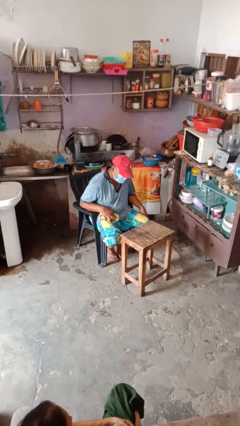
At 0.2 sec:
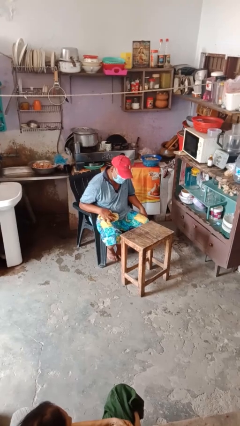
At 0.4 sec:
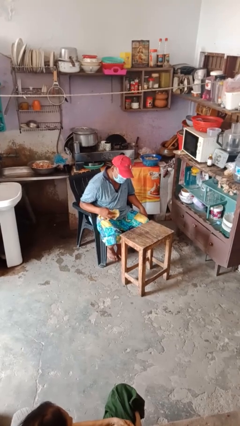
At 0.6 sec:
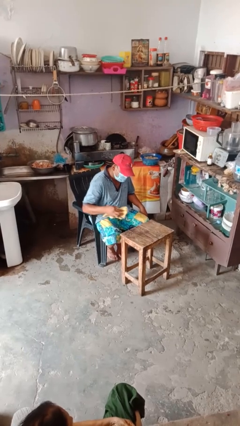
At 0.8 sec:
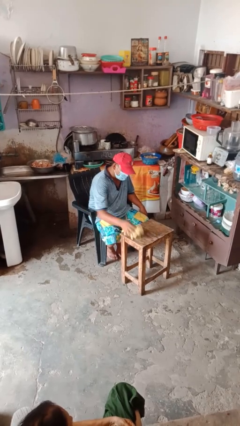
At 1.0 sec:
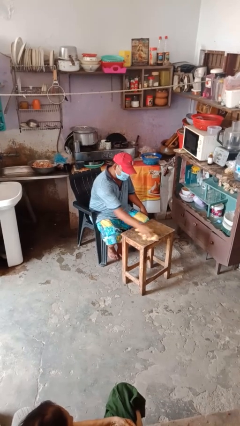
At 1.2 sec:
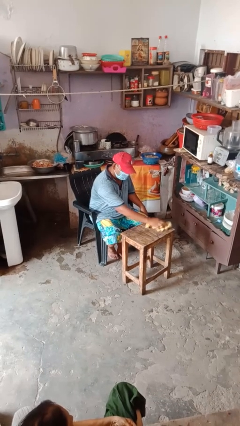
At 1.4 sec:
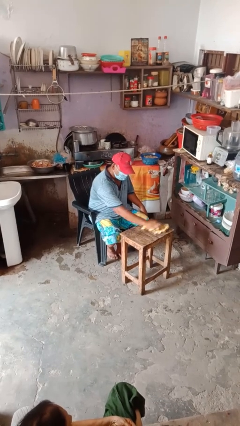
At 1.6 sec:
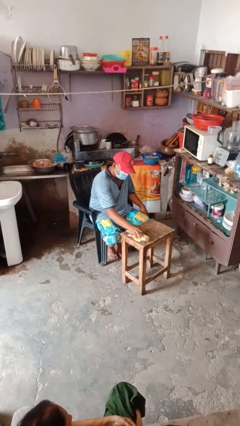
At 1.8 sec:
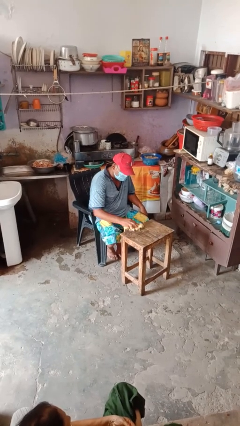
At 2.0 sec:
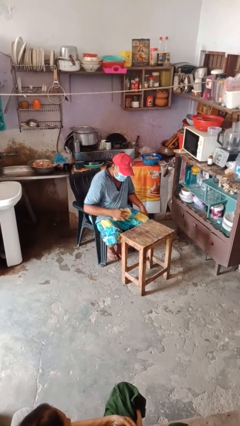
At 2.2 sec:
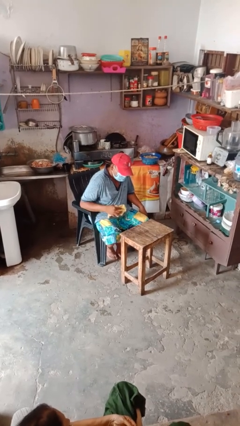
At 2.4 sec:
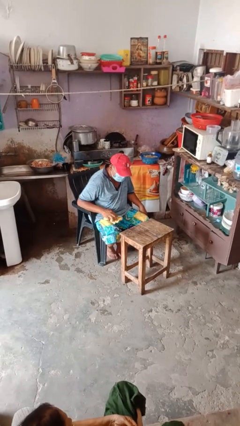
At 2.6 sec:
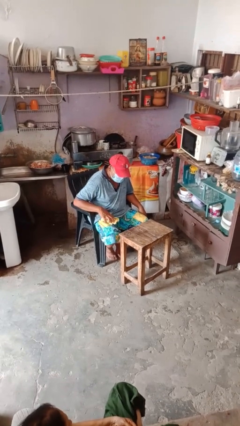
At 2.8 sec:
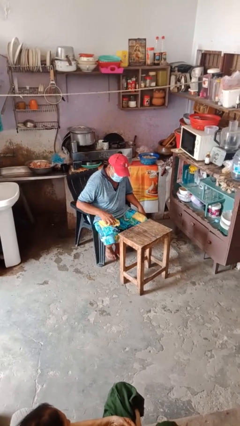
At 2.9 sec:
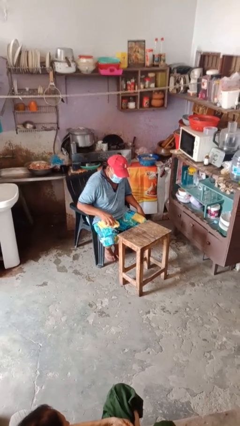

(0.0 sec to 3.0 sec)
person cleans table with rag

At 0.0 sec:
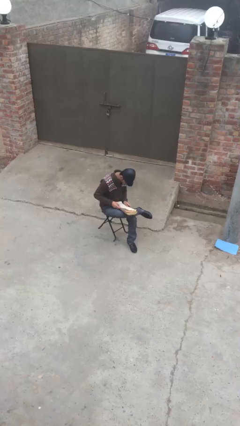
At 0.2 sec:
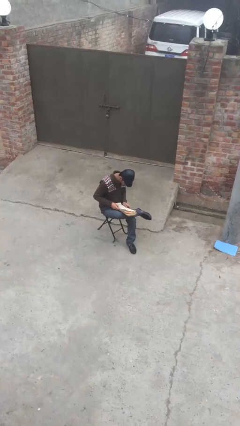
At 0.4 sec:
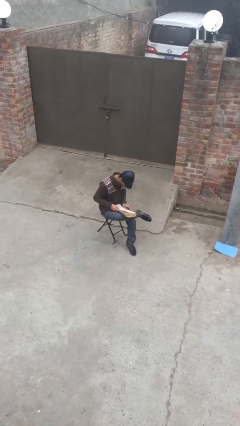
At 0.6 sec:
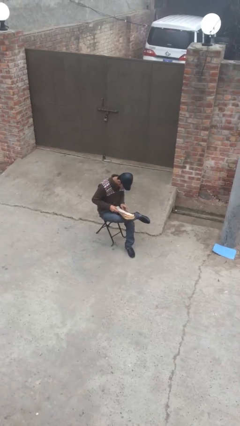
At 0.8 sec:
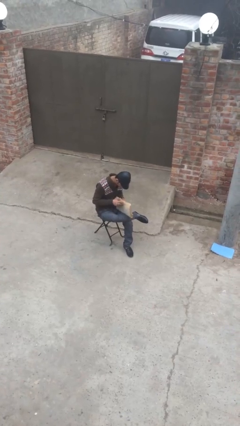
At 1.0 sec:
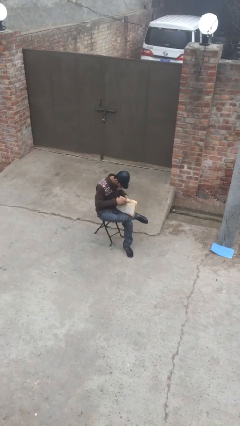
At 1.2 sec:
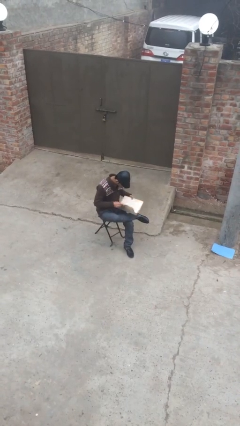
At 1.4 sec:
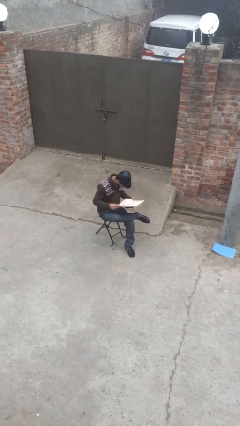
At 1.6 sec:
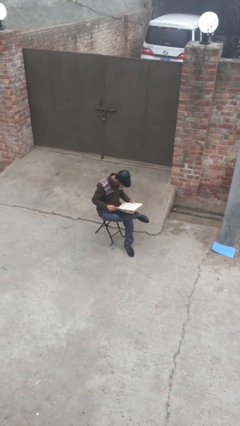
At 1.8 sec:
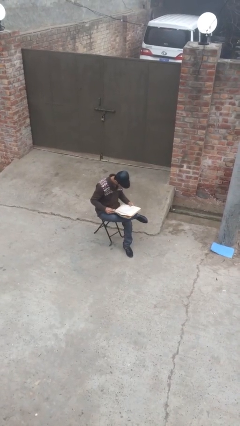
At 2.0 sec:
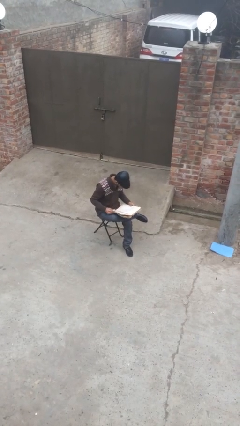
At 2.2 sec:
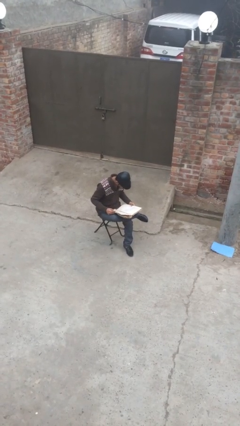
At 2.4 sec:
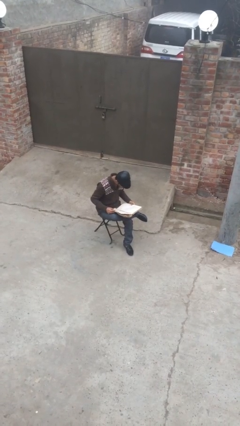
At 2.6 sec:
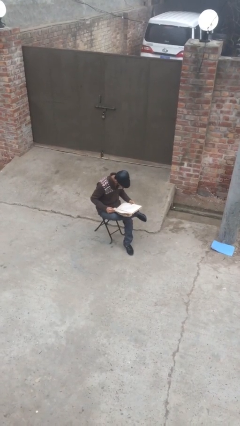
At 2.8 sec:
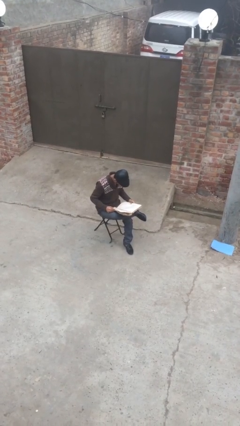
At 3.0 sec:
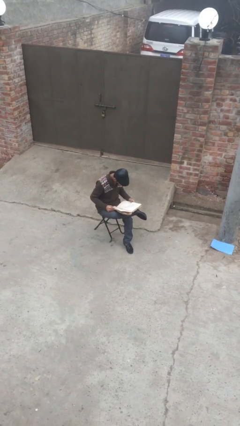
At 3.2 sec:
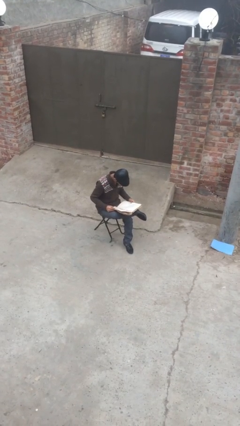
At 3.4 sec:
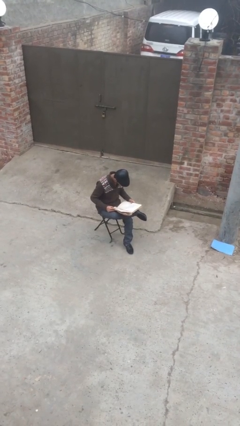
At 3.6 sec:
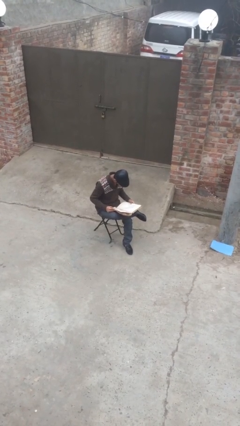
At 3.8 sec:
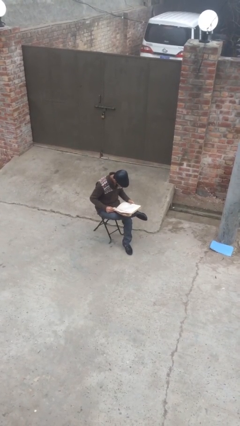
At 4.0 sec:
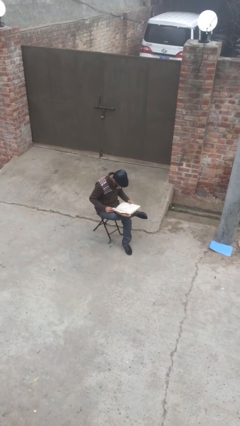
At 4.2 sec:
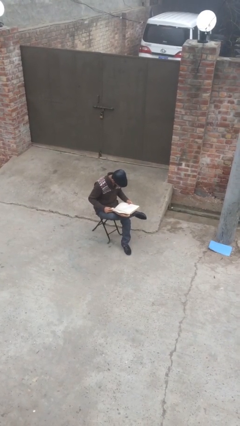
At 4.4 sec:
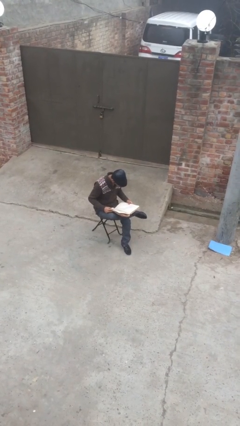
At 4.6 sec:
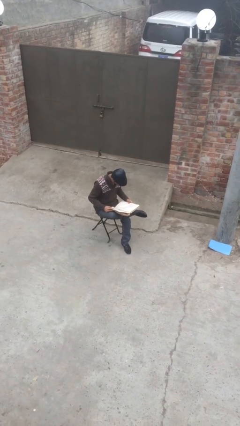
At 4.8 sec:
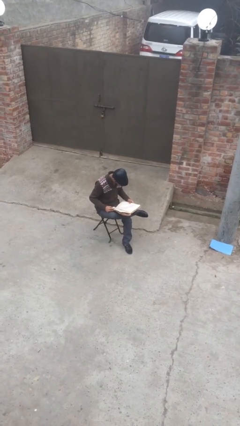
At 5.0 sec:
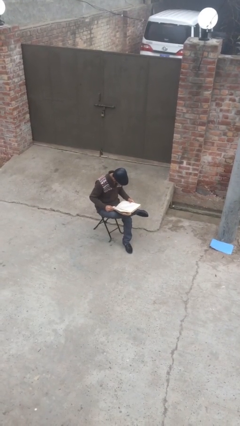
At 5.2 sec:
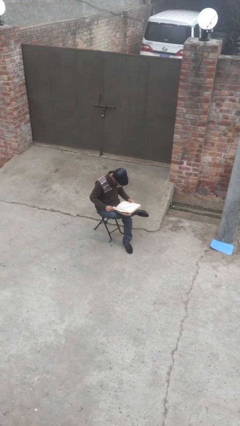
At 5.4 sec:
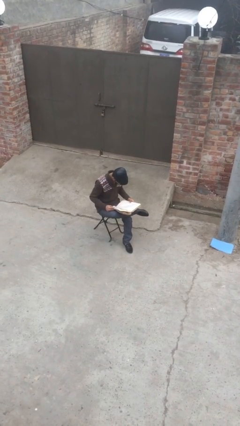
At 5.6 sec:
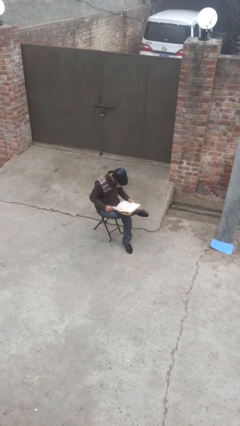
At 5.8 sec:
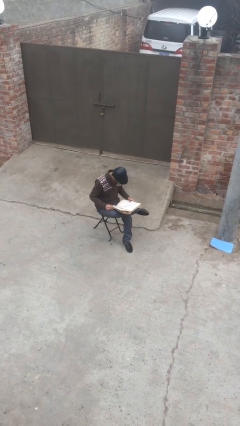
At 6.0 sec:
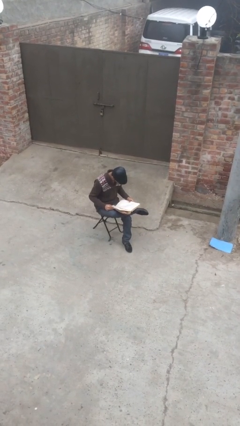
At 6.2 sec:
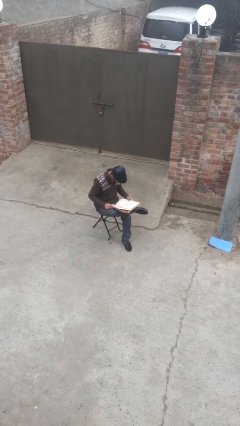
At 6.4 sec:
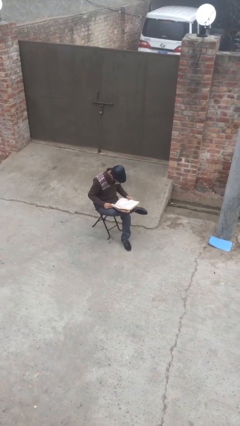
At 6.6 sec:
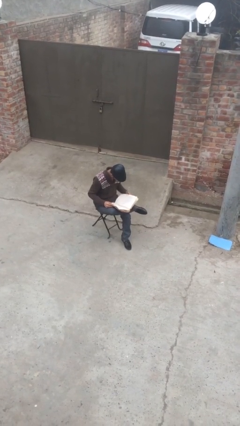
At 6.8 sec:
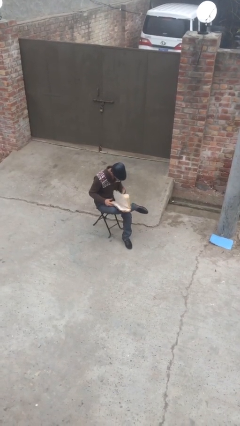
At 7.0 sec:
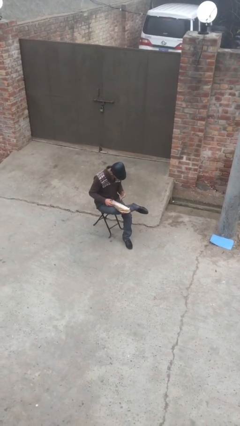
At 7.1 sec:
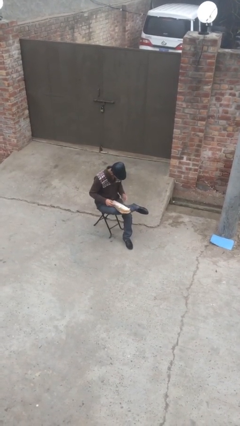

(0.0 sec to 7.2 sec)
person reads document

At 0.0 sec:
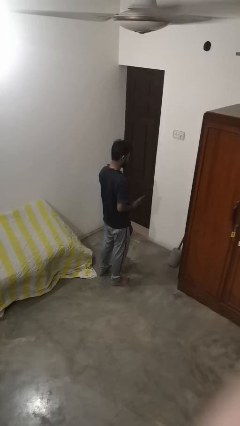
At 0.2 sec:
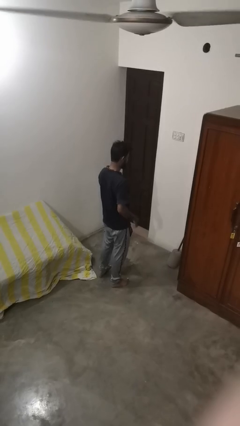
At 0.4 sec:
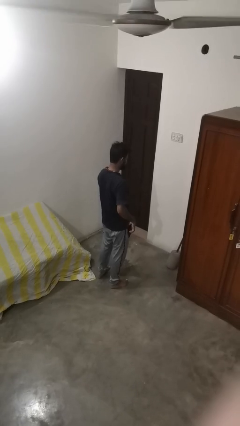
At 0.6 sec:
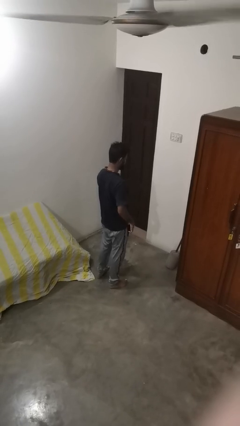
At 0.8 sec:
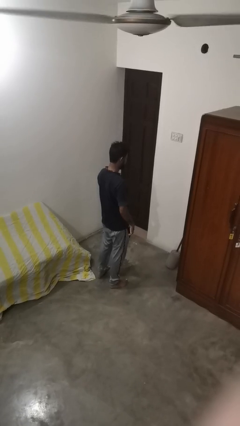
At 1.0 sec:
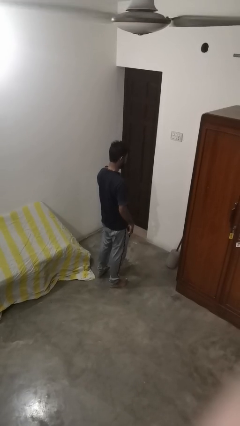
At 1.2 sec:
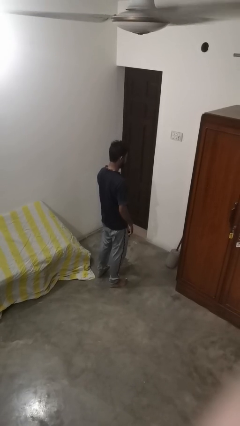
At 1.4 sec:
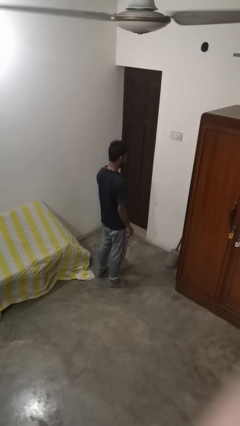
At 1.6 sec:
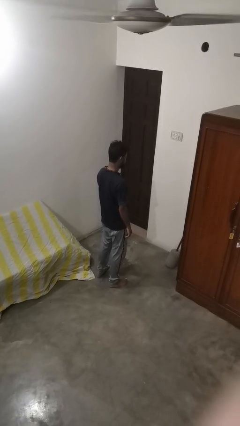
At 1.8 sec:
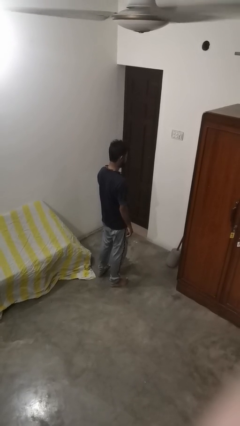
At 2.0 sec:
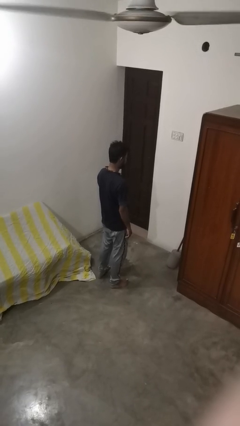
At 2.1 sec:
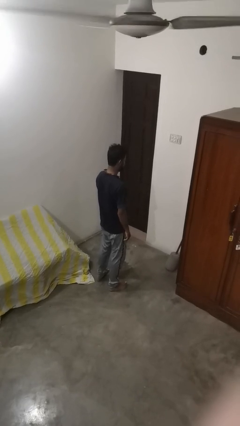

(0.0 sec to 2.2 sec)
person puts phone into pocket

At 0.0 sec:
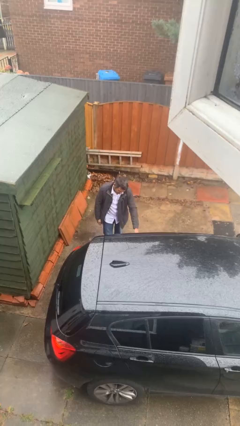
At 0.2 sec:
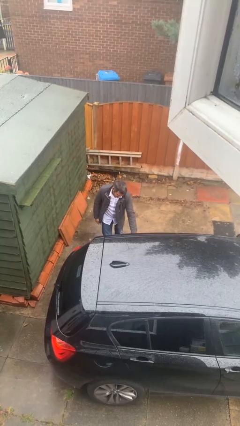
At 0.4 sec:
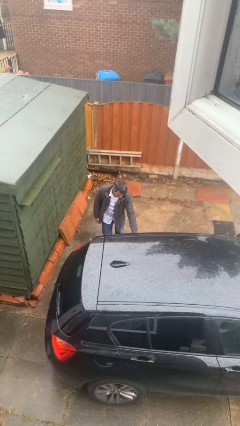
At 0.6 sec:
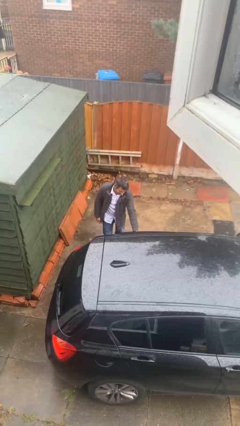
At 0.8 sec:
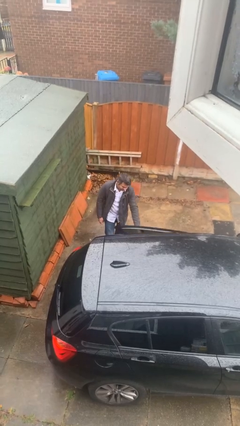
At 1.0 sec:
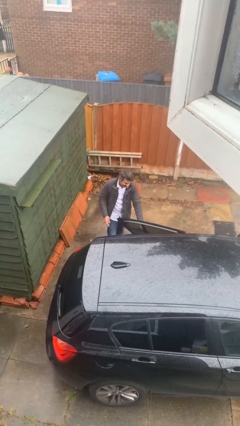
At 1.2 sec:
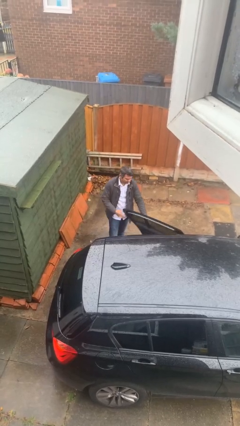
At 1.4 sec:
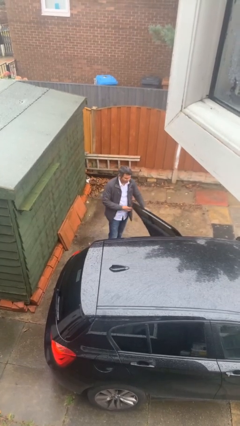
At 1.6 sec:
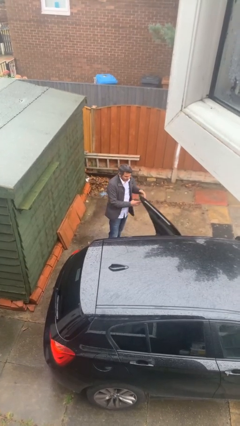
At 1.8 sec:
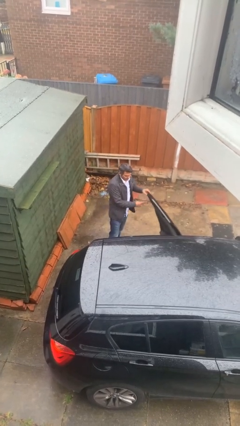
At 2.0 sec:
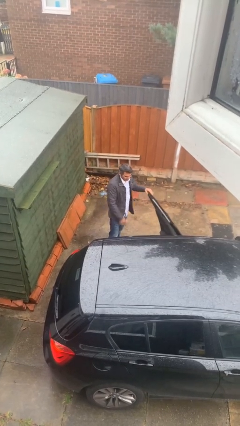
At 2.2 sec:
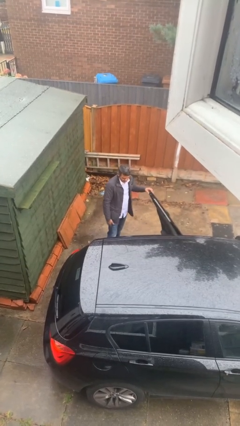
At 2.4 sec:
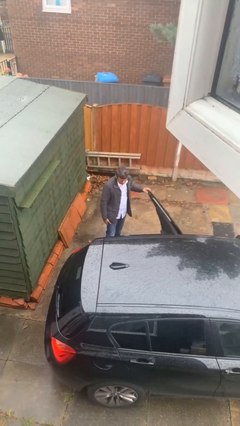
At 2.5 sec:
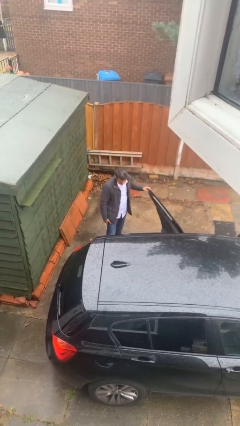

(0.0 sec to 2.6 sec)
person opens car door

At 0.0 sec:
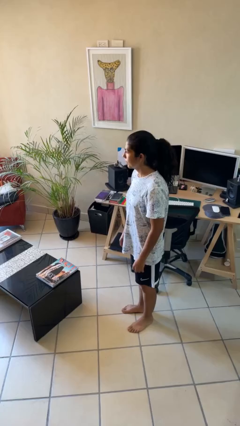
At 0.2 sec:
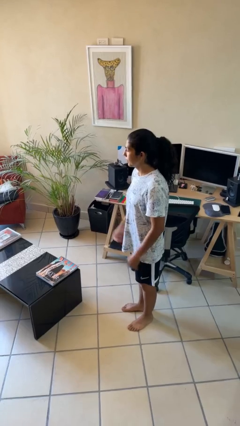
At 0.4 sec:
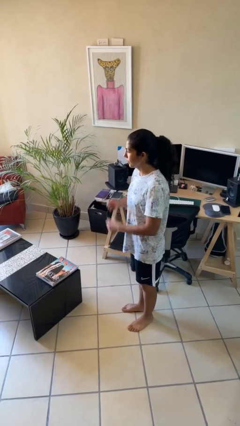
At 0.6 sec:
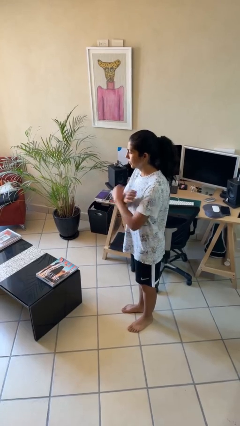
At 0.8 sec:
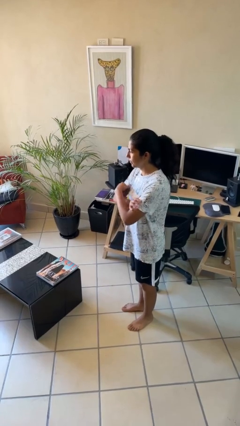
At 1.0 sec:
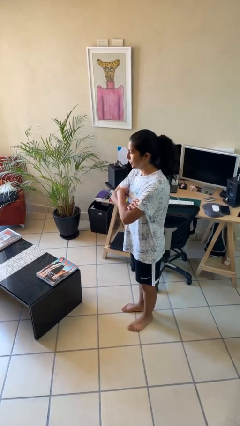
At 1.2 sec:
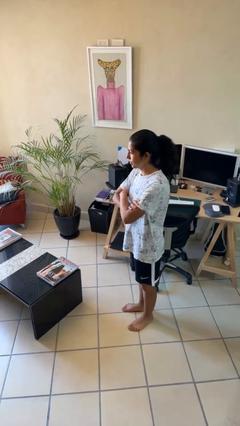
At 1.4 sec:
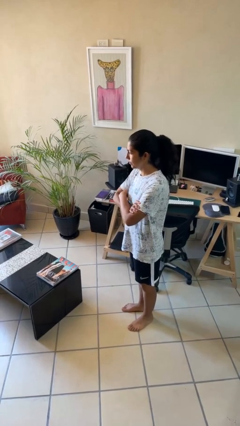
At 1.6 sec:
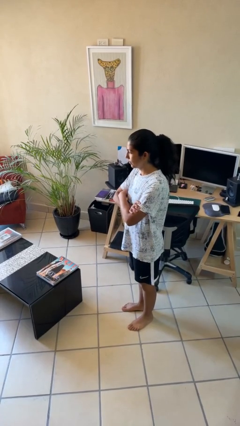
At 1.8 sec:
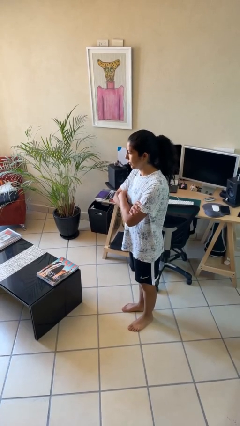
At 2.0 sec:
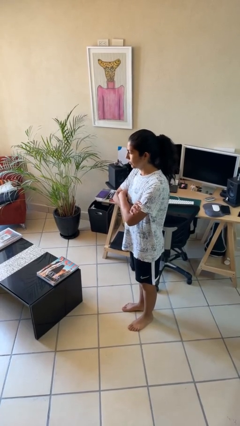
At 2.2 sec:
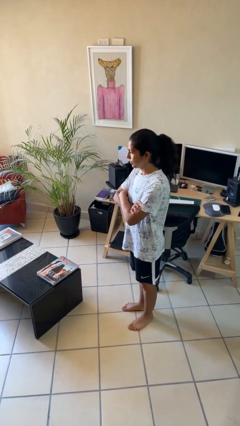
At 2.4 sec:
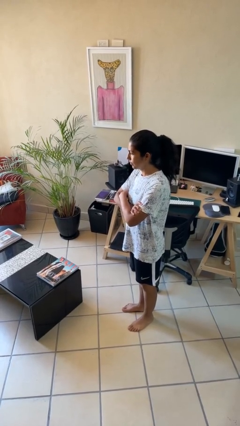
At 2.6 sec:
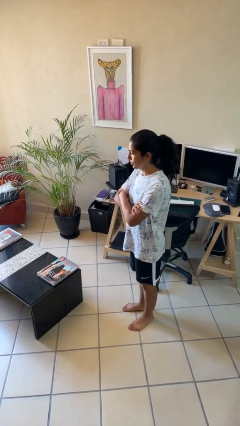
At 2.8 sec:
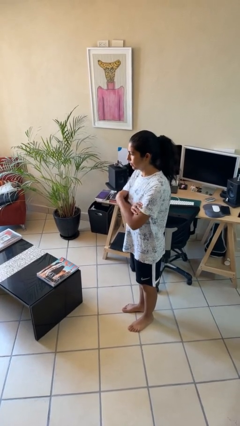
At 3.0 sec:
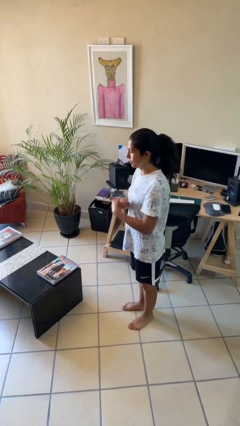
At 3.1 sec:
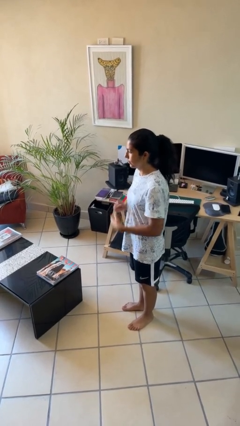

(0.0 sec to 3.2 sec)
person crosses arms
